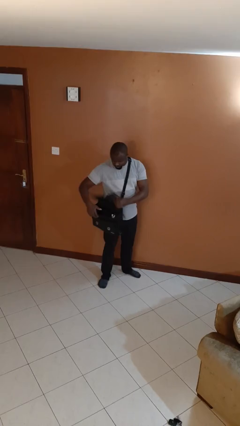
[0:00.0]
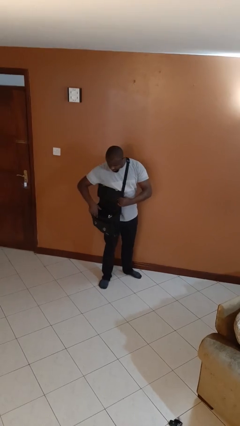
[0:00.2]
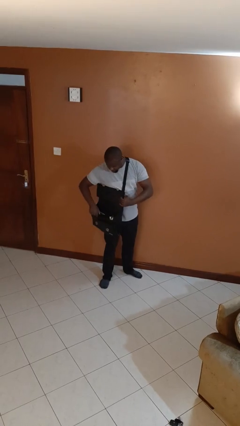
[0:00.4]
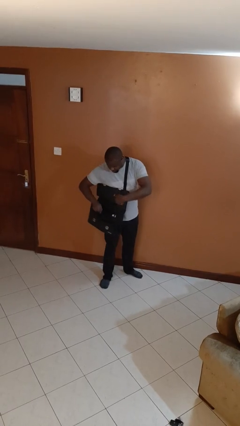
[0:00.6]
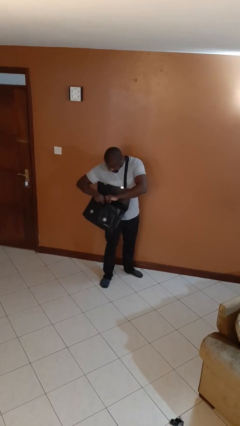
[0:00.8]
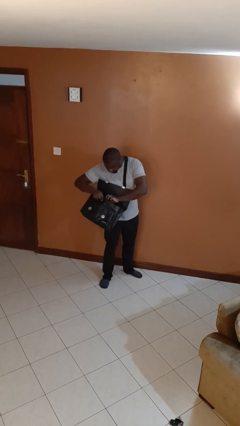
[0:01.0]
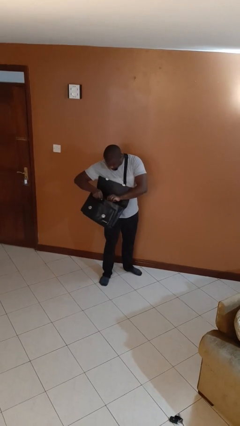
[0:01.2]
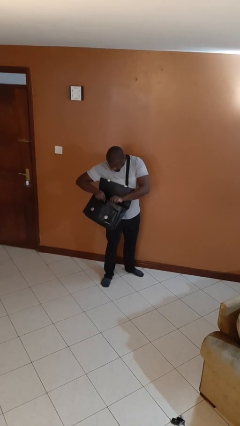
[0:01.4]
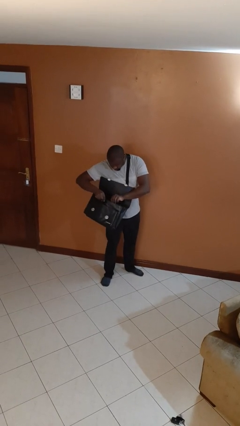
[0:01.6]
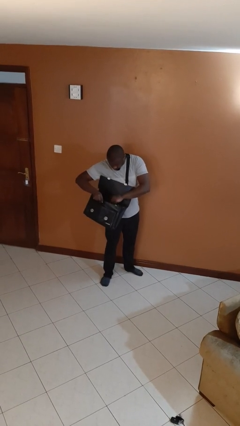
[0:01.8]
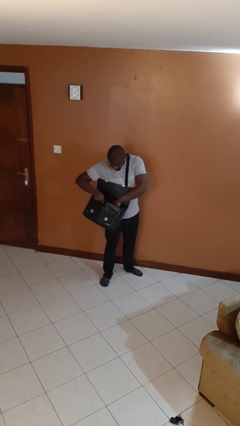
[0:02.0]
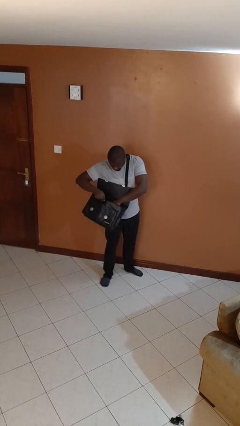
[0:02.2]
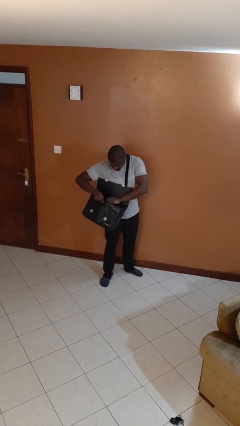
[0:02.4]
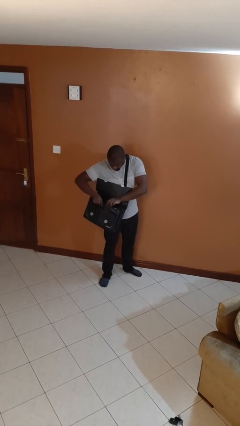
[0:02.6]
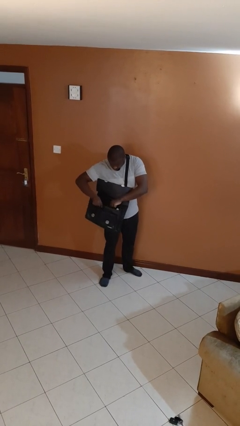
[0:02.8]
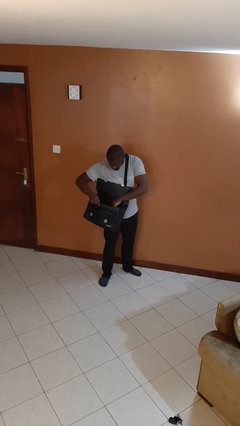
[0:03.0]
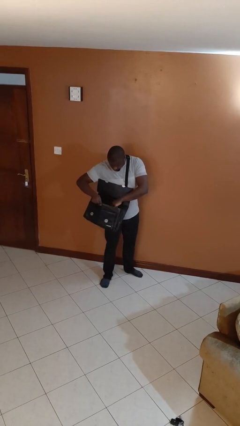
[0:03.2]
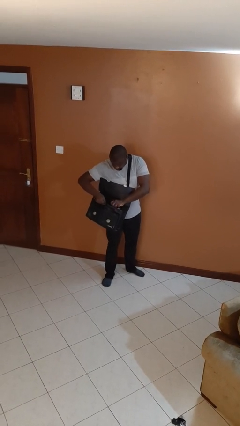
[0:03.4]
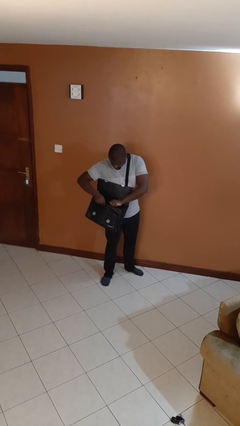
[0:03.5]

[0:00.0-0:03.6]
person searches in purse

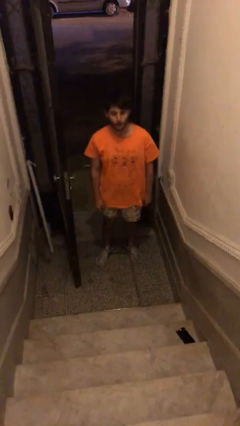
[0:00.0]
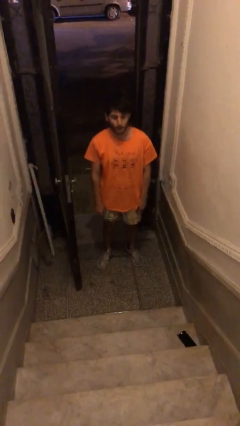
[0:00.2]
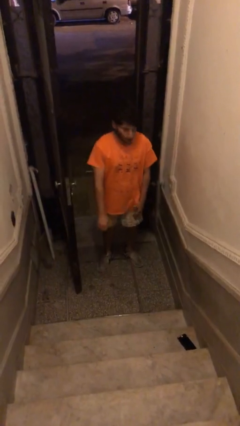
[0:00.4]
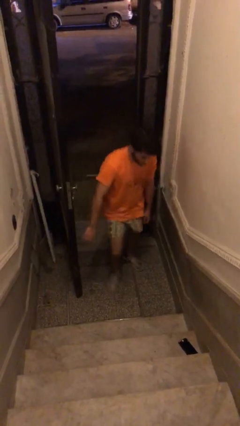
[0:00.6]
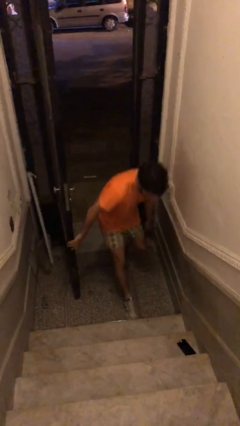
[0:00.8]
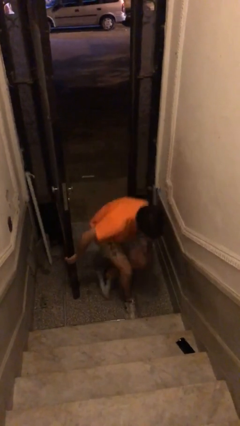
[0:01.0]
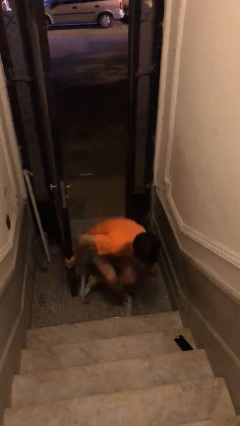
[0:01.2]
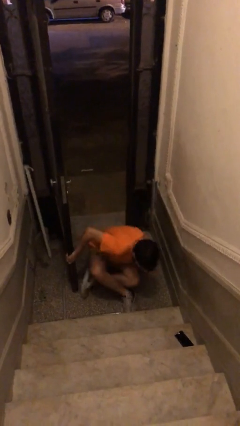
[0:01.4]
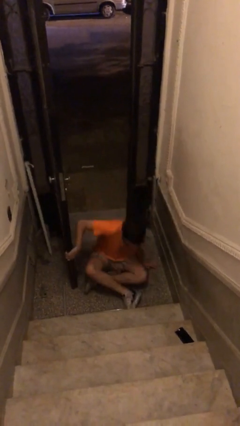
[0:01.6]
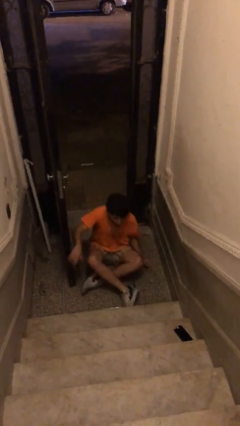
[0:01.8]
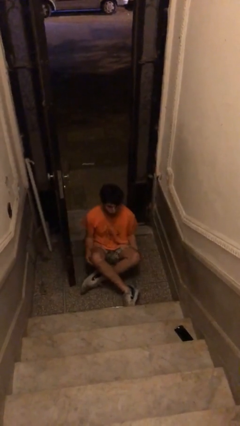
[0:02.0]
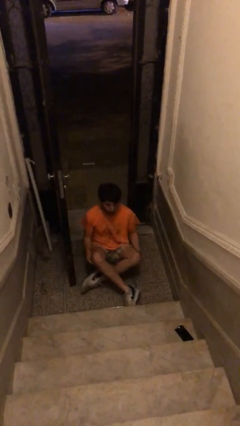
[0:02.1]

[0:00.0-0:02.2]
person sits down

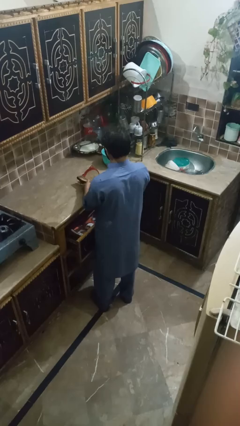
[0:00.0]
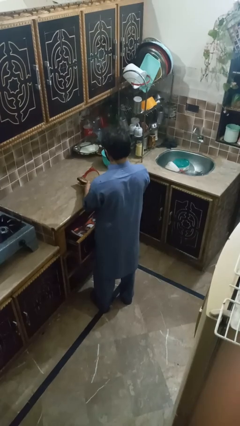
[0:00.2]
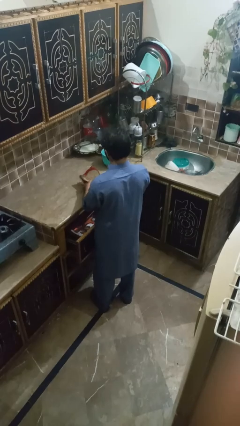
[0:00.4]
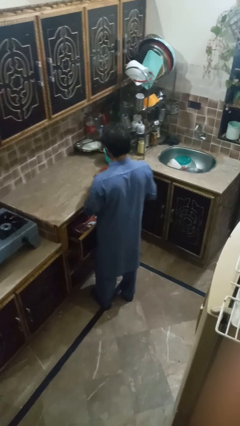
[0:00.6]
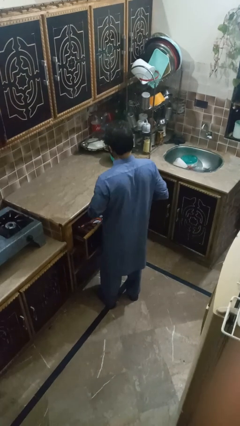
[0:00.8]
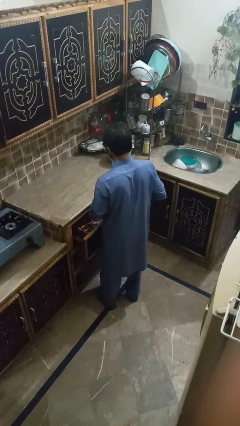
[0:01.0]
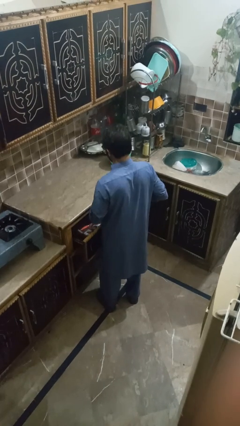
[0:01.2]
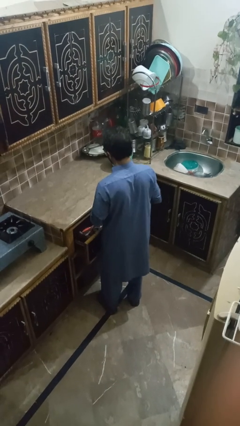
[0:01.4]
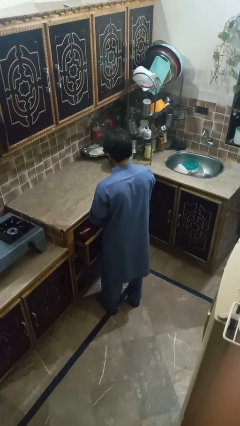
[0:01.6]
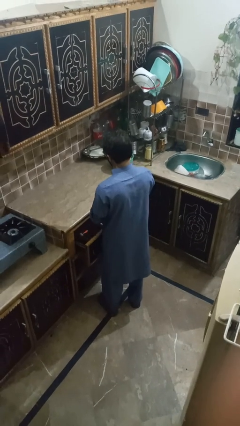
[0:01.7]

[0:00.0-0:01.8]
person puts object into kitchen drawer

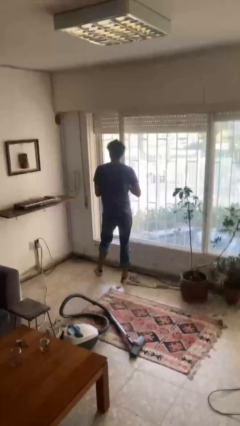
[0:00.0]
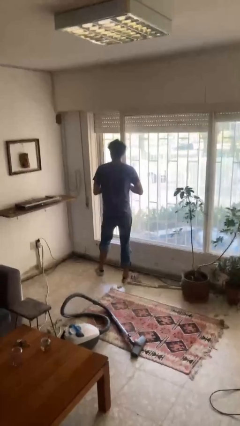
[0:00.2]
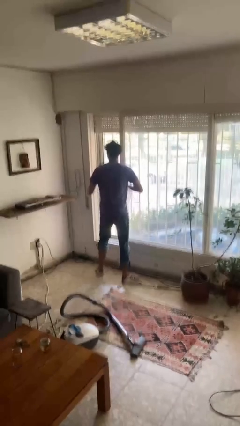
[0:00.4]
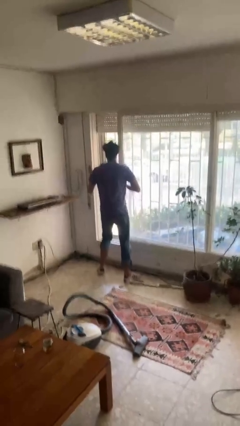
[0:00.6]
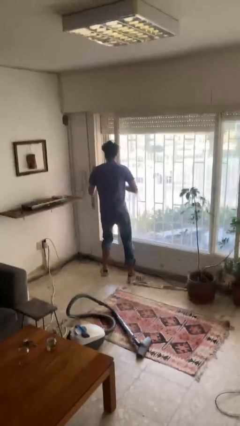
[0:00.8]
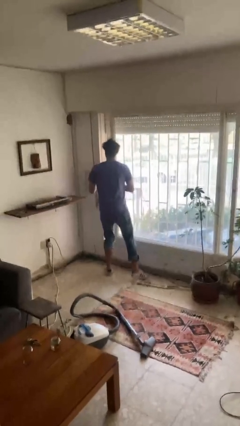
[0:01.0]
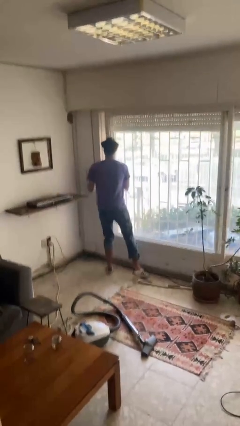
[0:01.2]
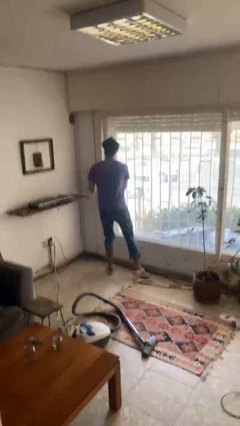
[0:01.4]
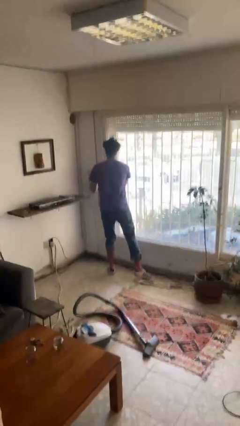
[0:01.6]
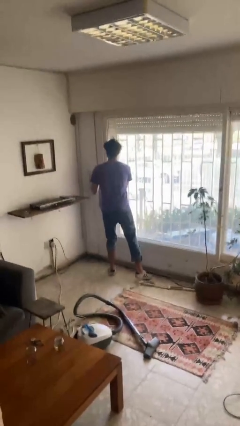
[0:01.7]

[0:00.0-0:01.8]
person closes sliding door

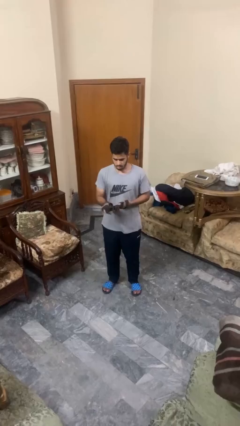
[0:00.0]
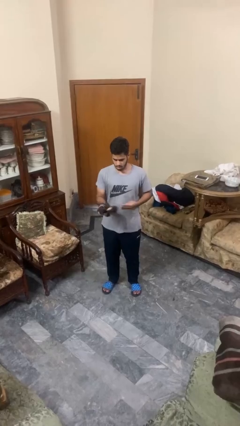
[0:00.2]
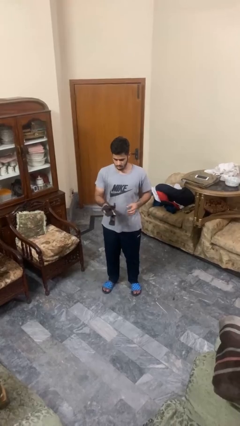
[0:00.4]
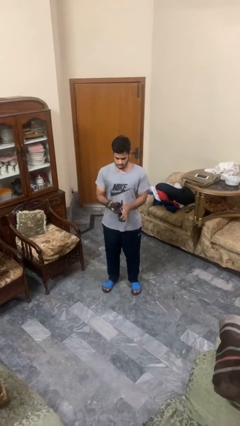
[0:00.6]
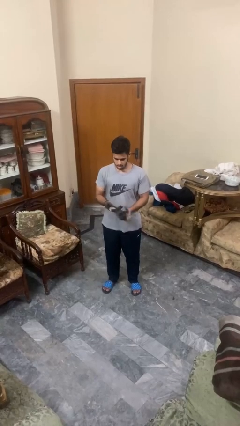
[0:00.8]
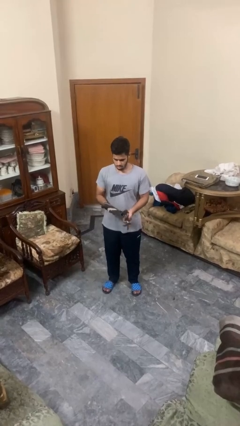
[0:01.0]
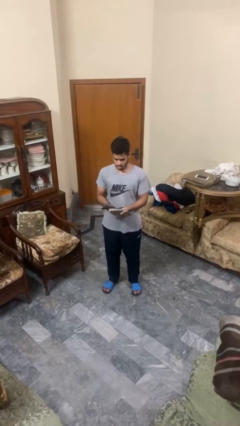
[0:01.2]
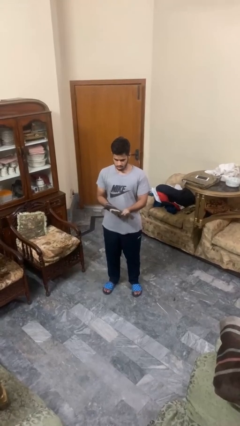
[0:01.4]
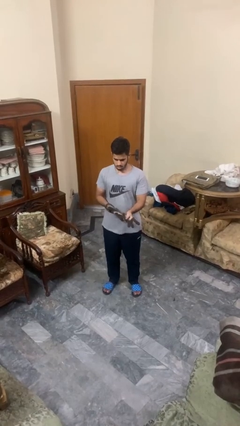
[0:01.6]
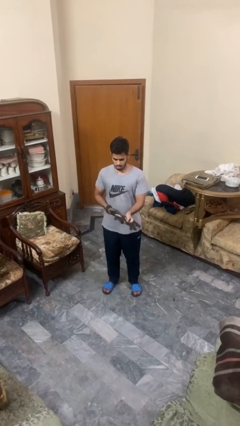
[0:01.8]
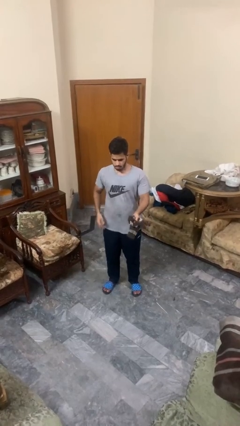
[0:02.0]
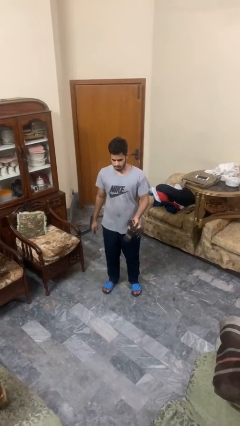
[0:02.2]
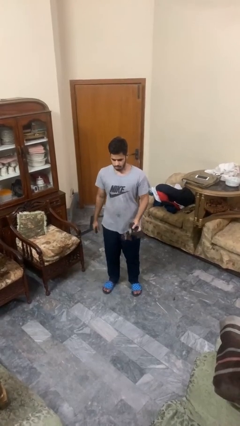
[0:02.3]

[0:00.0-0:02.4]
person takes off gloves

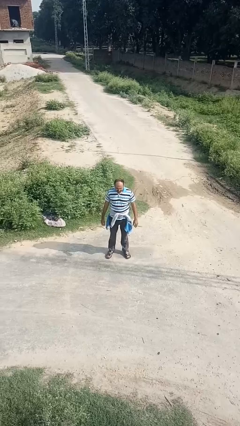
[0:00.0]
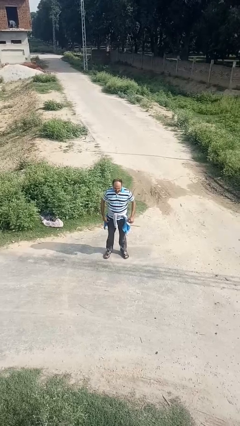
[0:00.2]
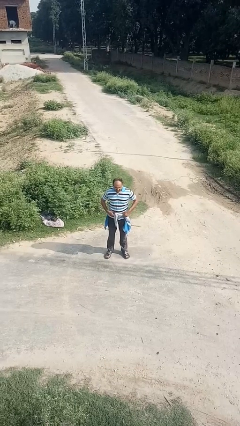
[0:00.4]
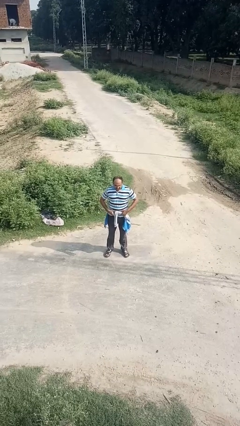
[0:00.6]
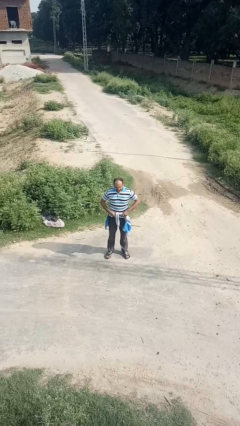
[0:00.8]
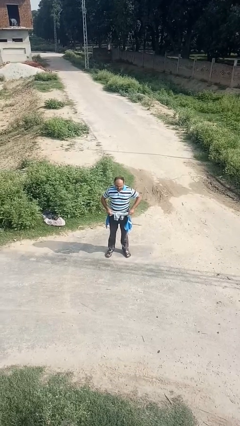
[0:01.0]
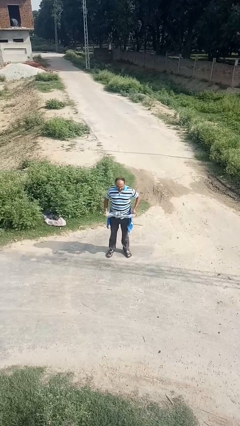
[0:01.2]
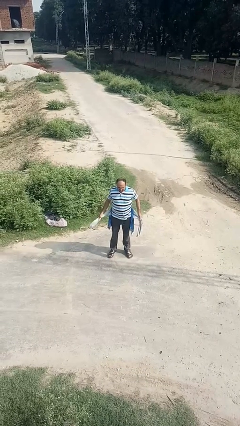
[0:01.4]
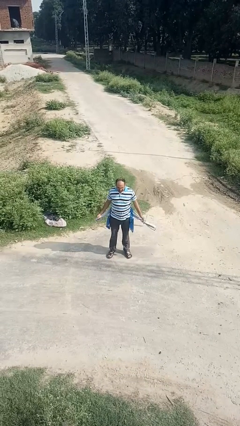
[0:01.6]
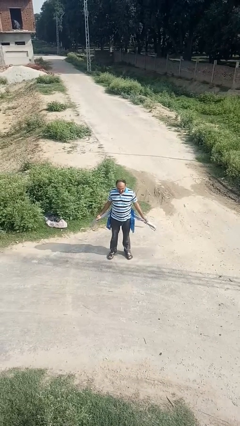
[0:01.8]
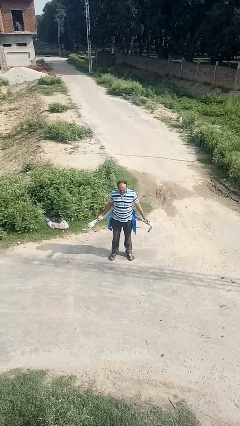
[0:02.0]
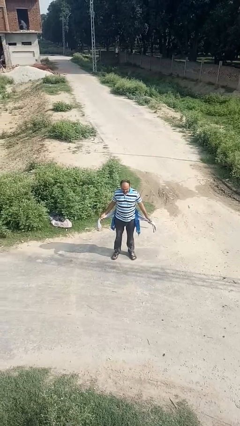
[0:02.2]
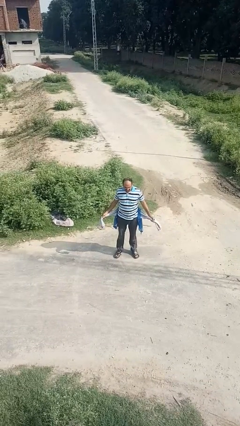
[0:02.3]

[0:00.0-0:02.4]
person unties jacket around waist

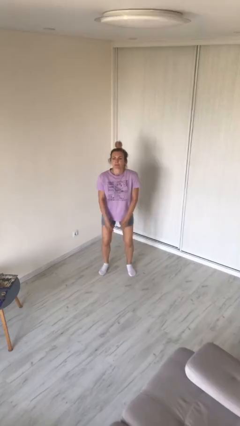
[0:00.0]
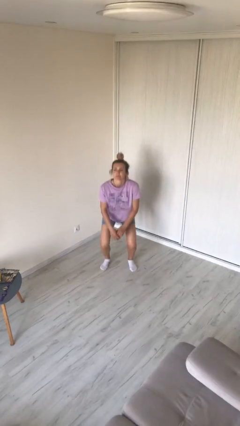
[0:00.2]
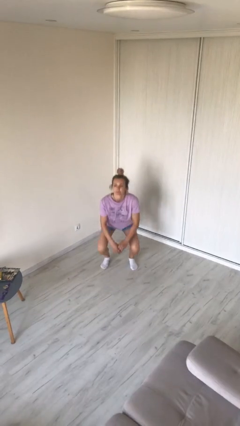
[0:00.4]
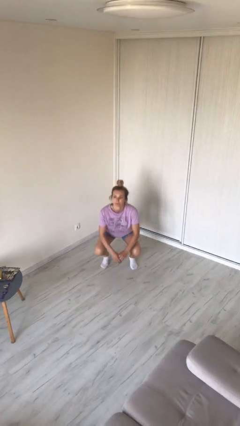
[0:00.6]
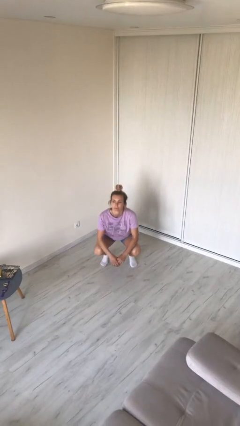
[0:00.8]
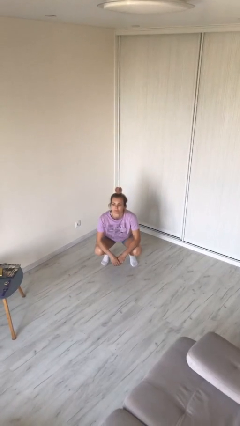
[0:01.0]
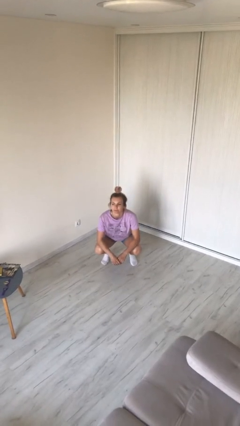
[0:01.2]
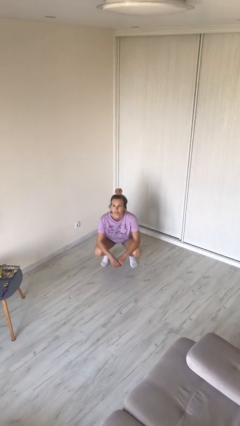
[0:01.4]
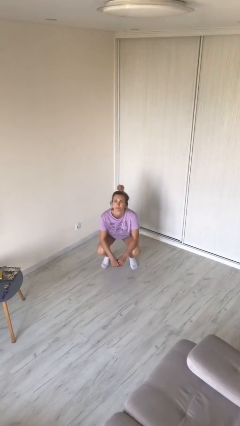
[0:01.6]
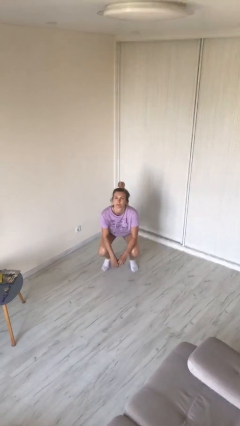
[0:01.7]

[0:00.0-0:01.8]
person squats

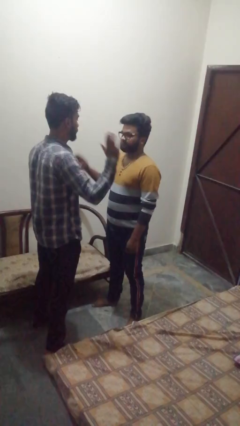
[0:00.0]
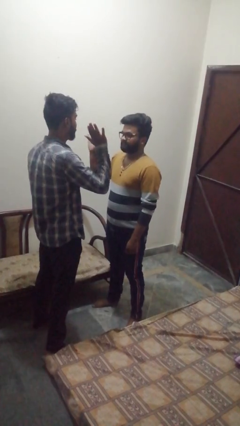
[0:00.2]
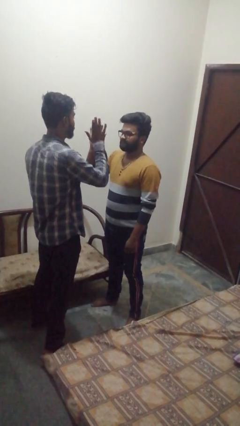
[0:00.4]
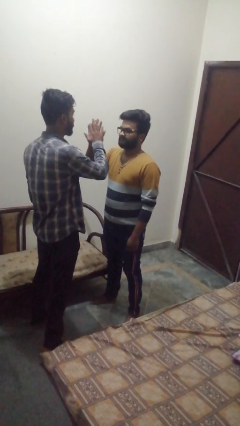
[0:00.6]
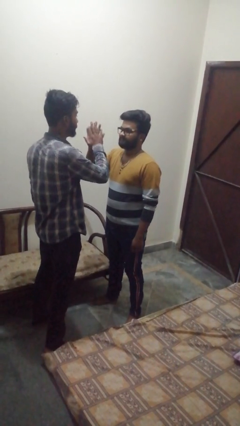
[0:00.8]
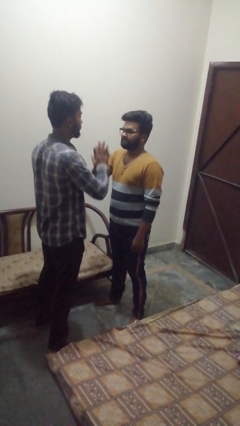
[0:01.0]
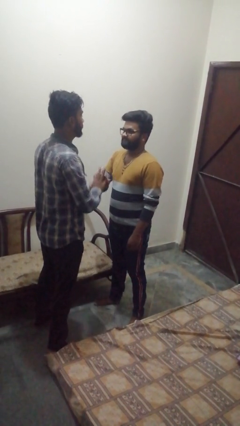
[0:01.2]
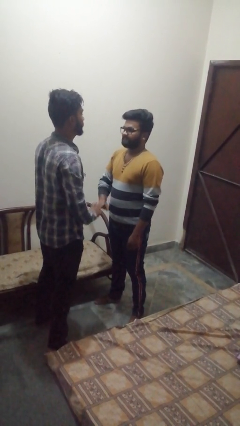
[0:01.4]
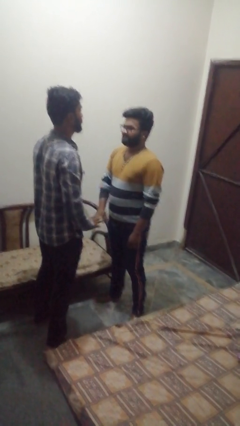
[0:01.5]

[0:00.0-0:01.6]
person highfives hand
